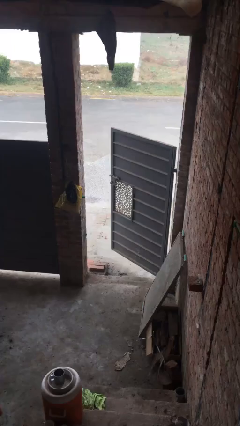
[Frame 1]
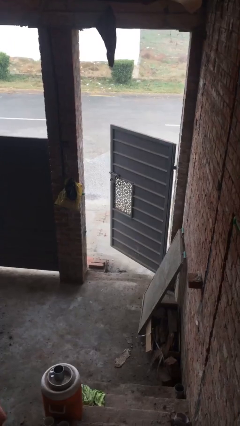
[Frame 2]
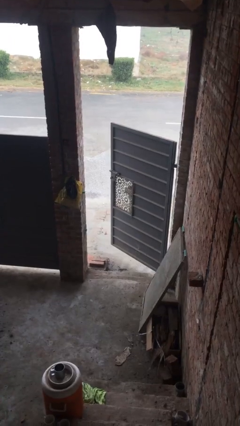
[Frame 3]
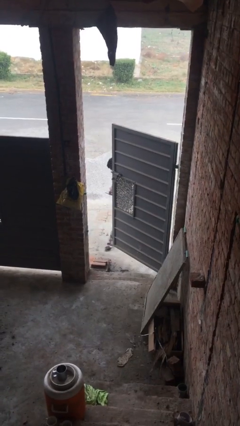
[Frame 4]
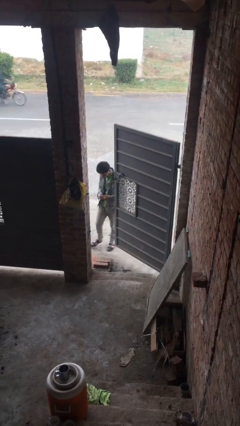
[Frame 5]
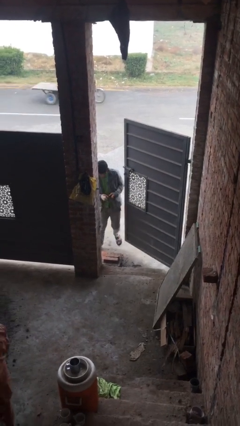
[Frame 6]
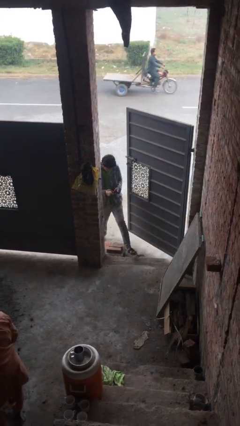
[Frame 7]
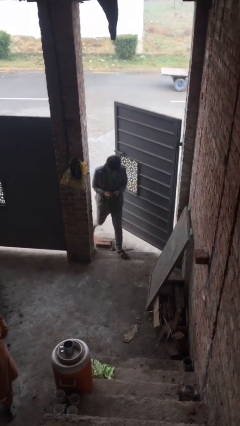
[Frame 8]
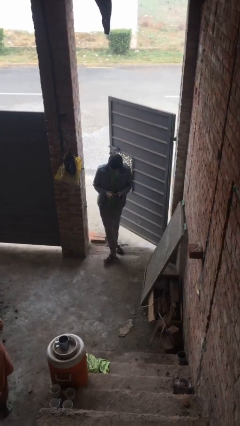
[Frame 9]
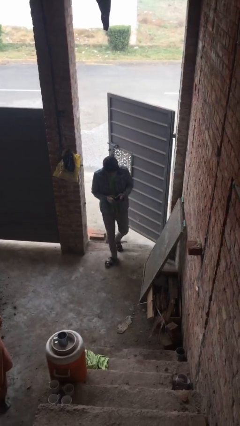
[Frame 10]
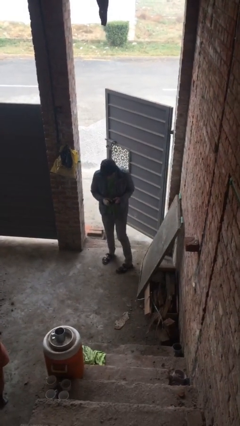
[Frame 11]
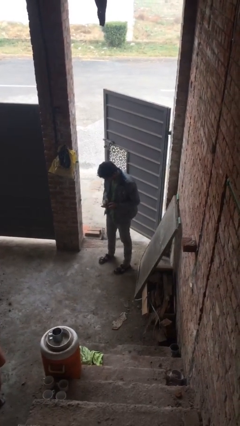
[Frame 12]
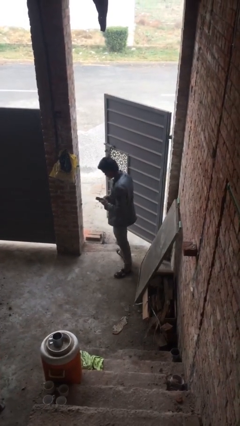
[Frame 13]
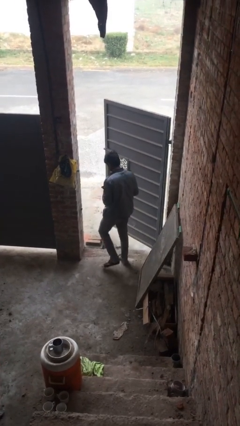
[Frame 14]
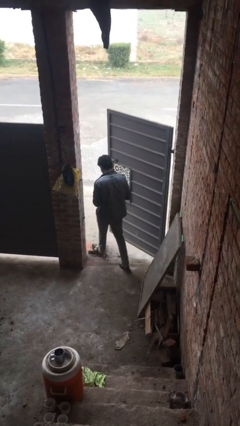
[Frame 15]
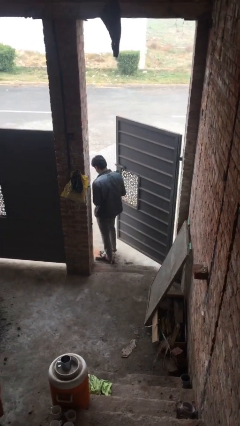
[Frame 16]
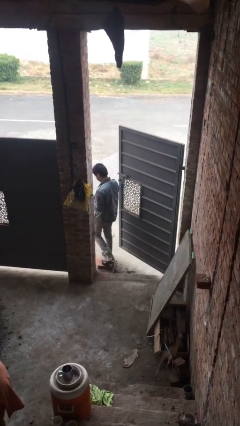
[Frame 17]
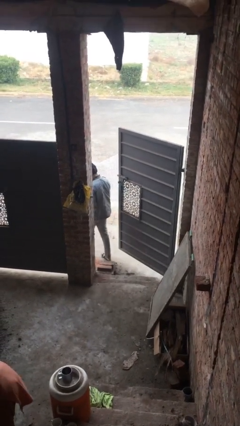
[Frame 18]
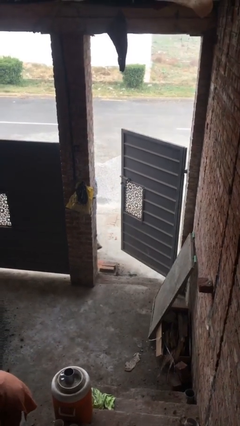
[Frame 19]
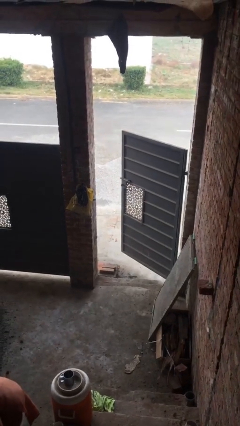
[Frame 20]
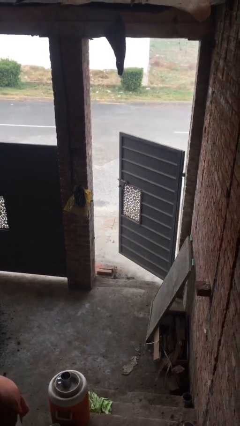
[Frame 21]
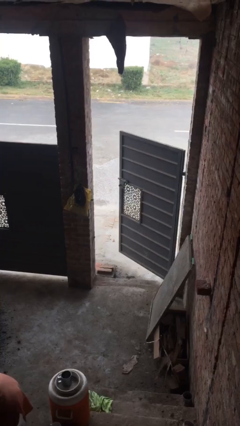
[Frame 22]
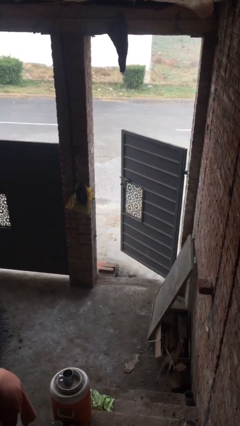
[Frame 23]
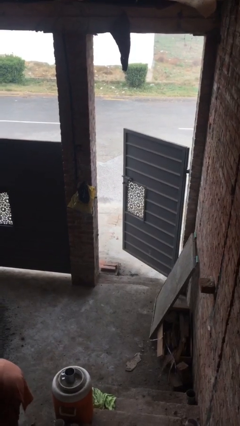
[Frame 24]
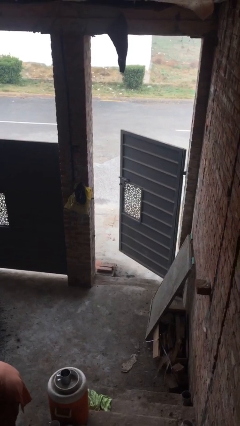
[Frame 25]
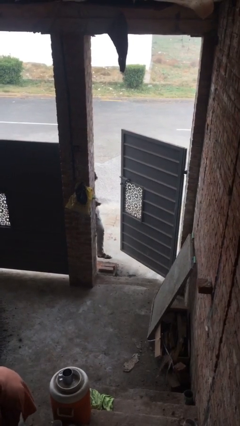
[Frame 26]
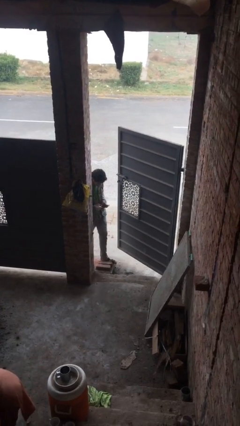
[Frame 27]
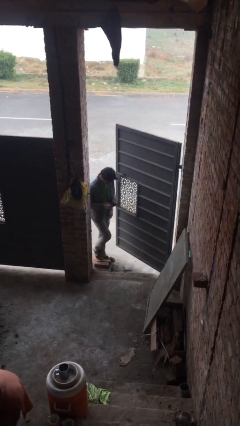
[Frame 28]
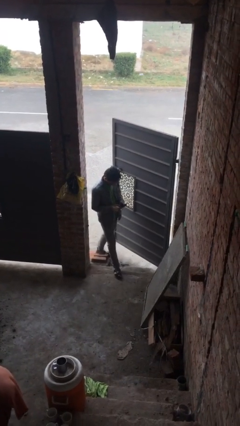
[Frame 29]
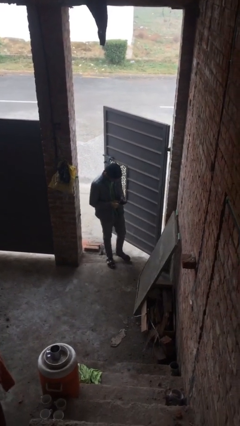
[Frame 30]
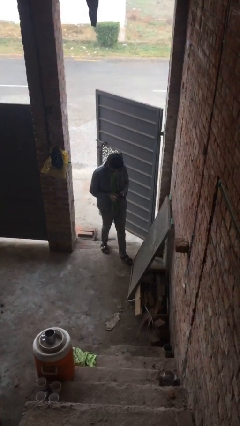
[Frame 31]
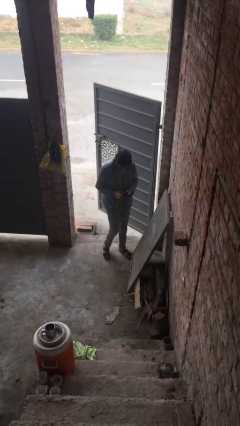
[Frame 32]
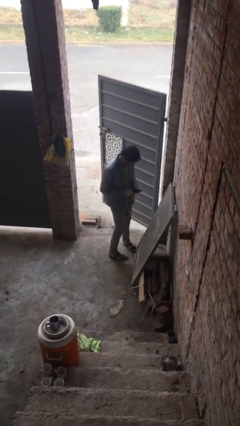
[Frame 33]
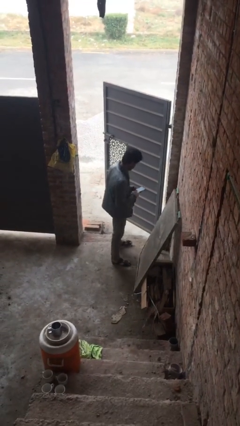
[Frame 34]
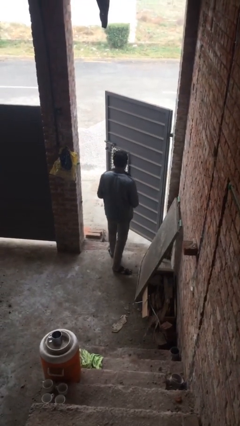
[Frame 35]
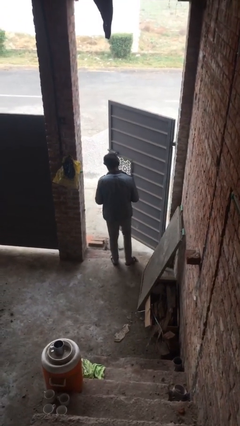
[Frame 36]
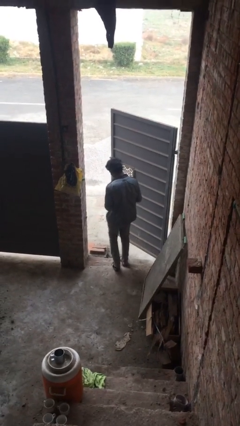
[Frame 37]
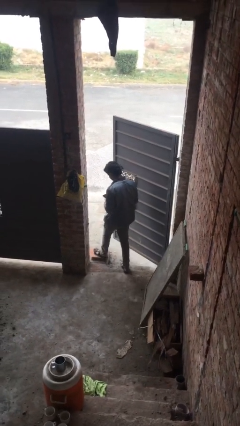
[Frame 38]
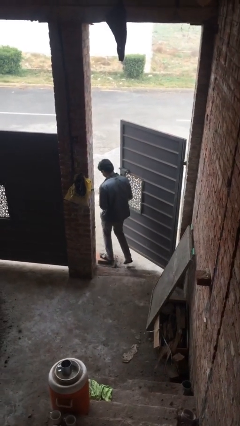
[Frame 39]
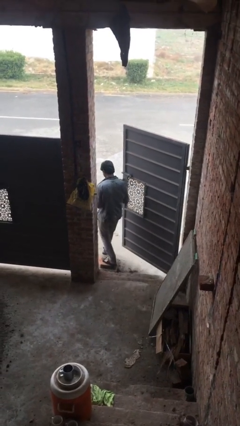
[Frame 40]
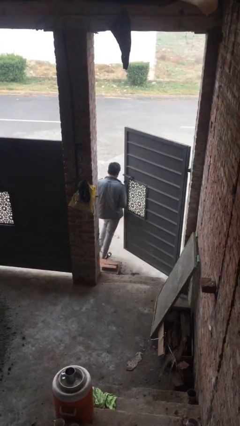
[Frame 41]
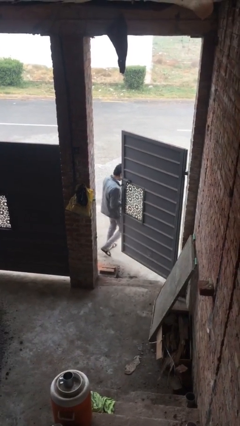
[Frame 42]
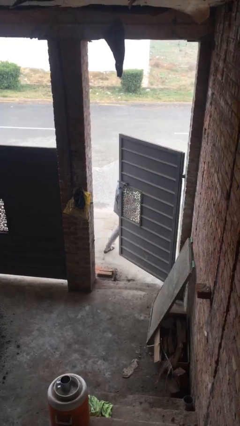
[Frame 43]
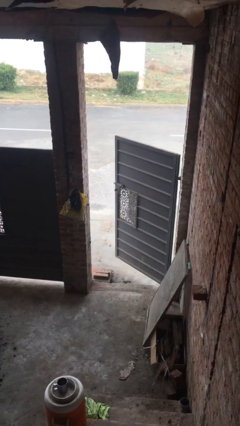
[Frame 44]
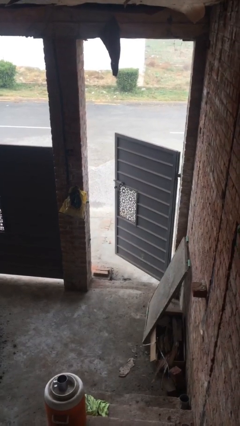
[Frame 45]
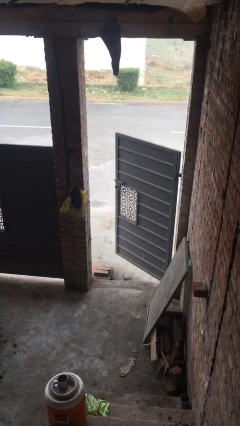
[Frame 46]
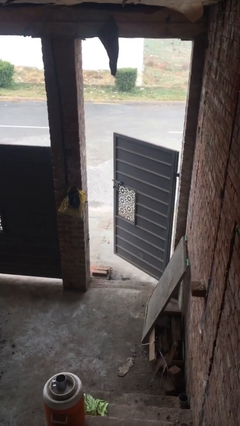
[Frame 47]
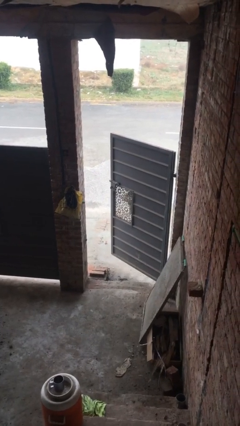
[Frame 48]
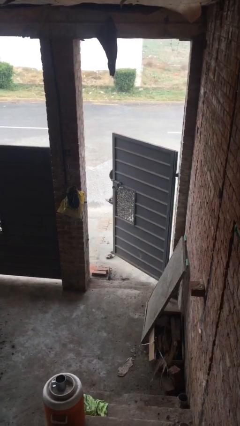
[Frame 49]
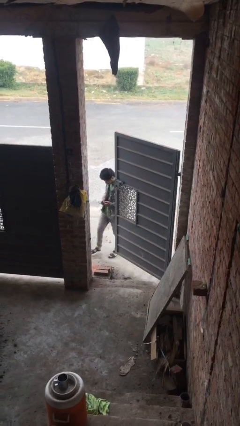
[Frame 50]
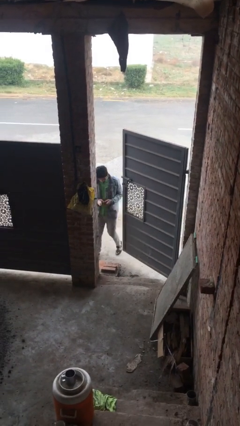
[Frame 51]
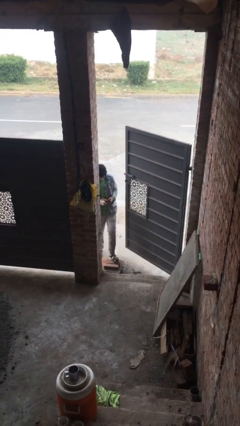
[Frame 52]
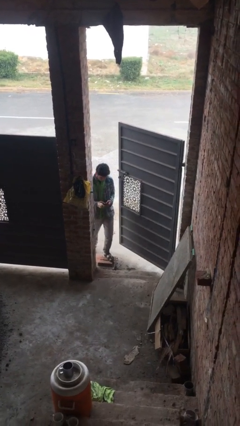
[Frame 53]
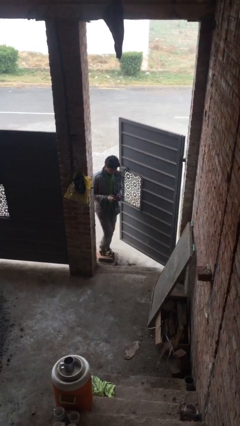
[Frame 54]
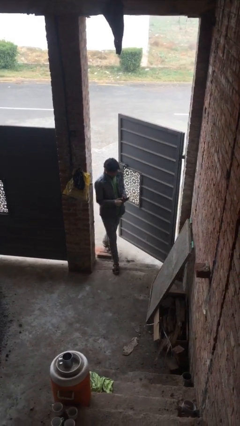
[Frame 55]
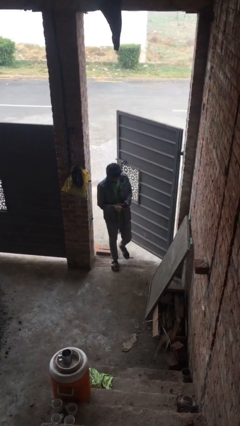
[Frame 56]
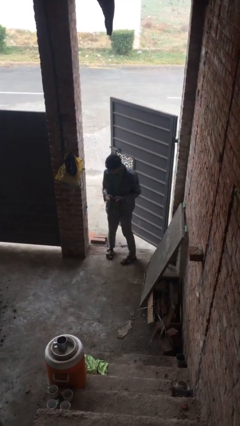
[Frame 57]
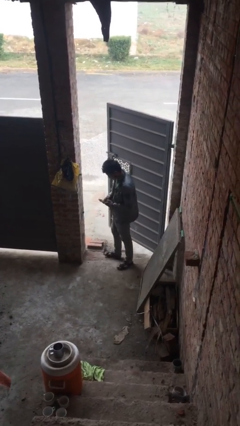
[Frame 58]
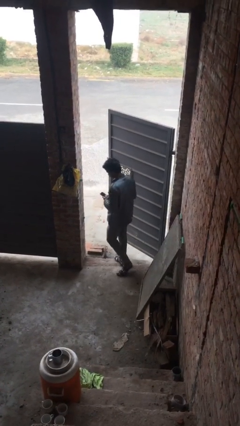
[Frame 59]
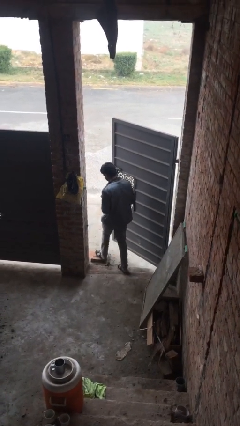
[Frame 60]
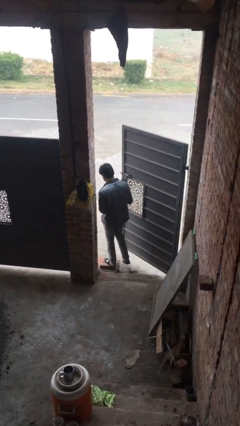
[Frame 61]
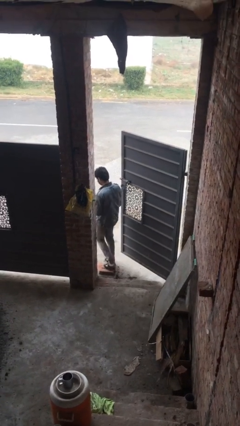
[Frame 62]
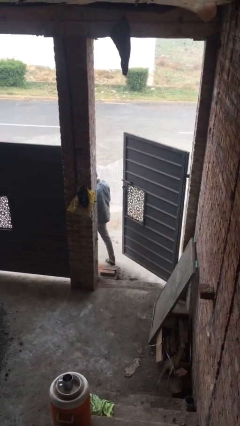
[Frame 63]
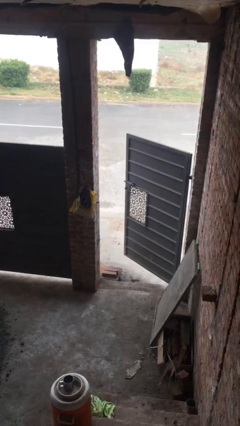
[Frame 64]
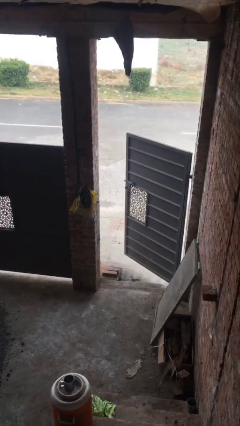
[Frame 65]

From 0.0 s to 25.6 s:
person texts on phone

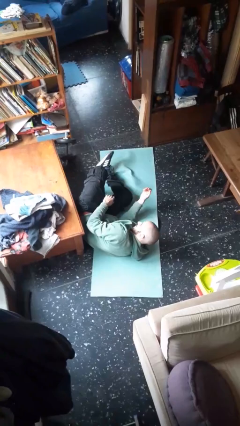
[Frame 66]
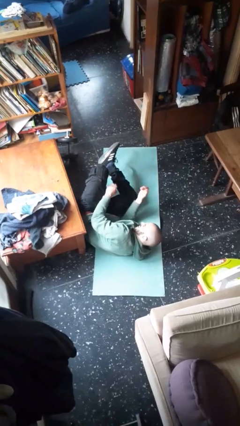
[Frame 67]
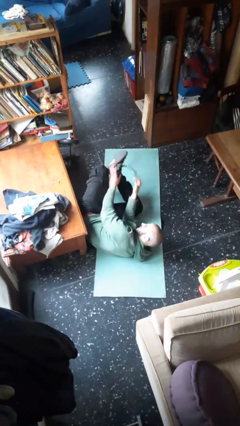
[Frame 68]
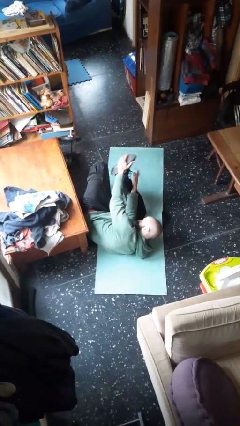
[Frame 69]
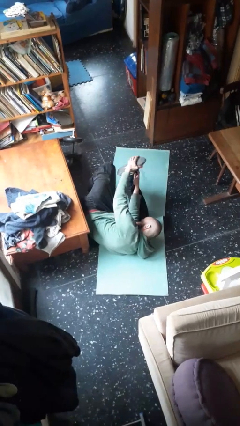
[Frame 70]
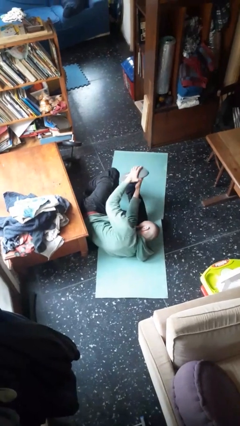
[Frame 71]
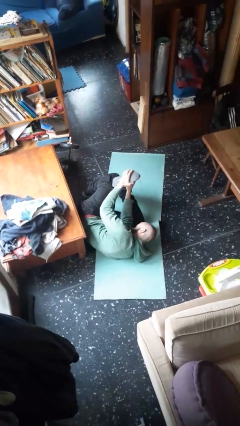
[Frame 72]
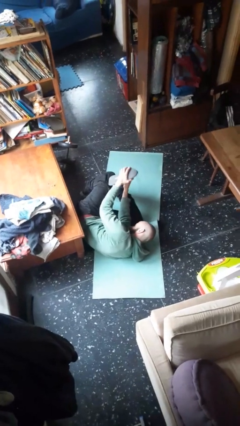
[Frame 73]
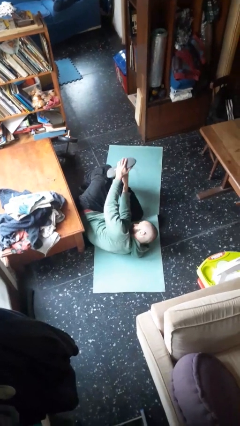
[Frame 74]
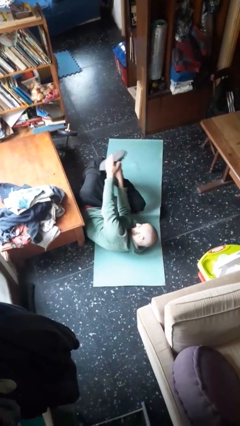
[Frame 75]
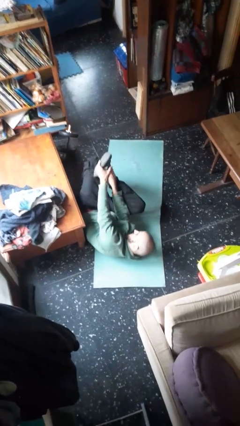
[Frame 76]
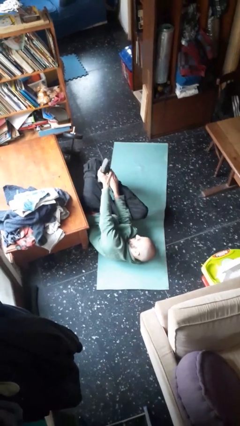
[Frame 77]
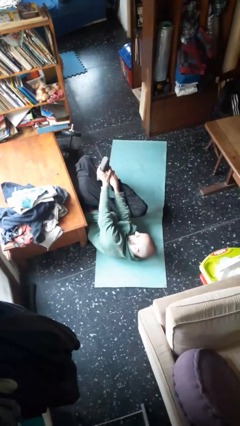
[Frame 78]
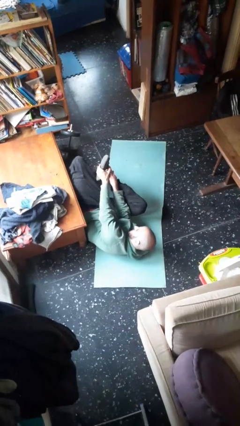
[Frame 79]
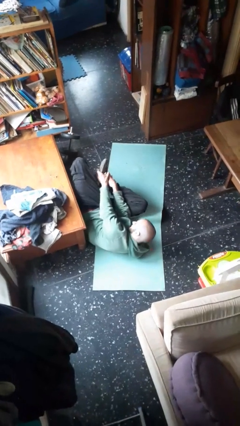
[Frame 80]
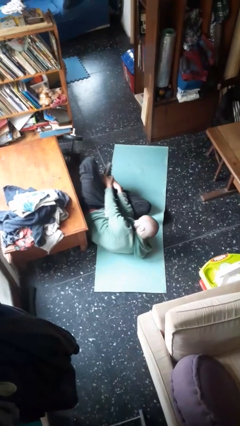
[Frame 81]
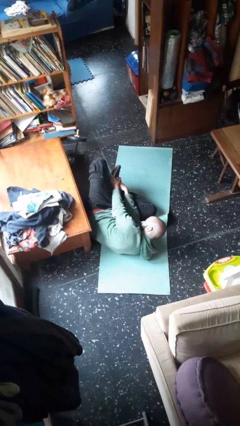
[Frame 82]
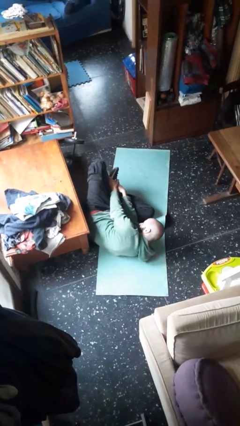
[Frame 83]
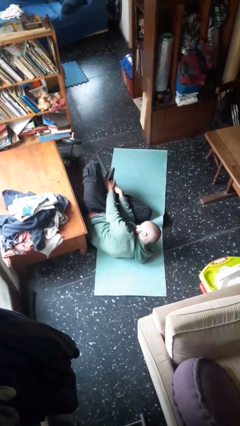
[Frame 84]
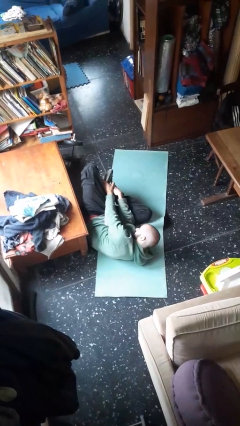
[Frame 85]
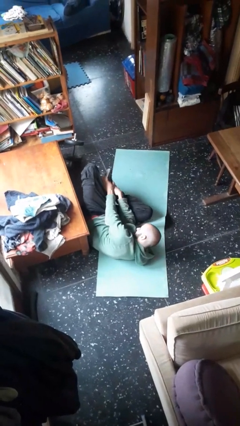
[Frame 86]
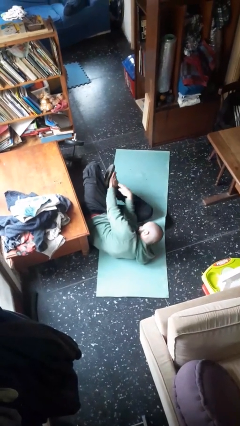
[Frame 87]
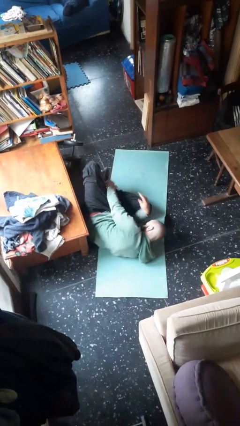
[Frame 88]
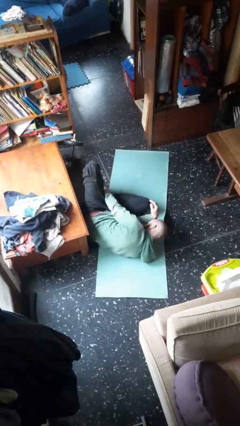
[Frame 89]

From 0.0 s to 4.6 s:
person lies down on floor

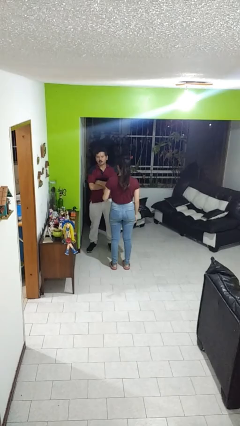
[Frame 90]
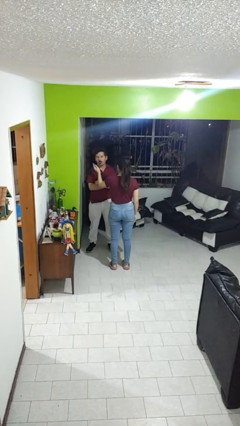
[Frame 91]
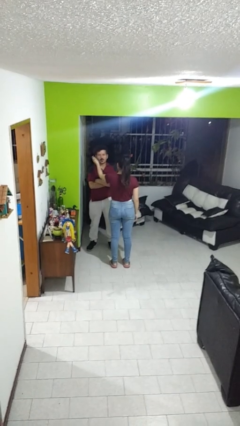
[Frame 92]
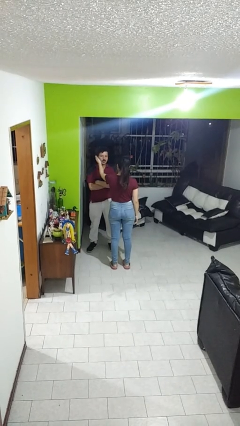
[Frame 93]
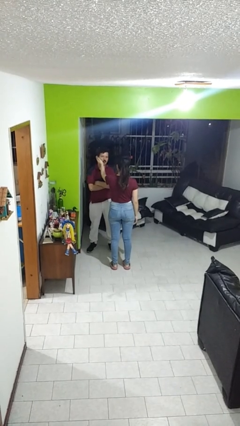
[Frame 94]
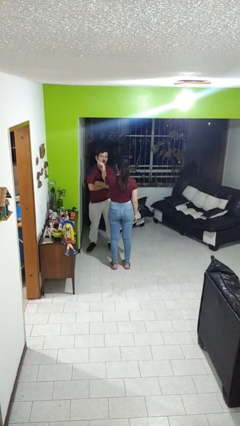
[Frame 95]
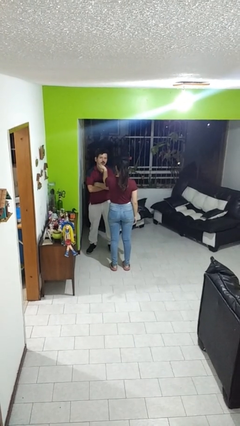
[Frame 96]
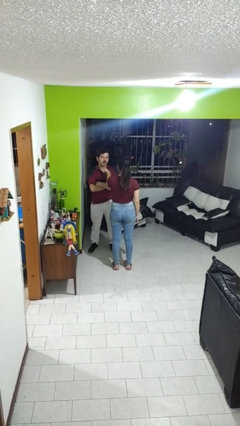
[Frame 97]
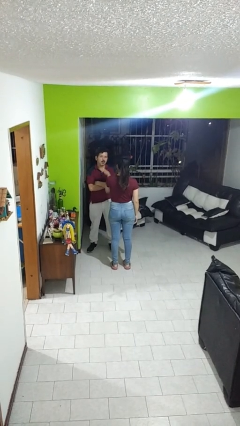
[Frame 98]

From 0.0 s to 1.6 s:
person touches face of person
